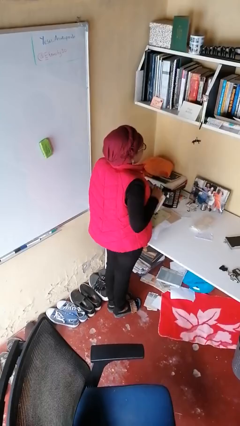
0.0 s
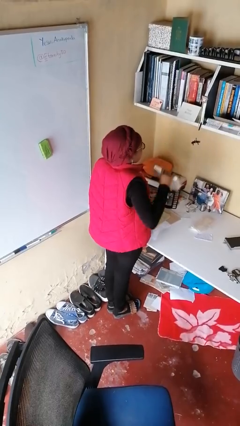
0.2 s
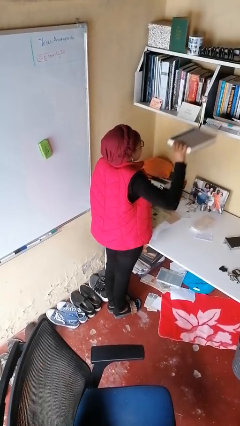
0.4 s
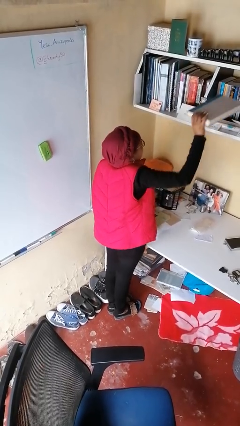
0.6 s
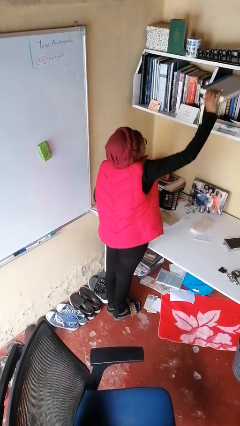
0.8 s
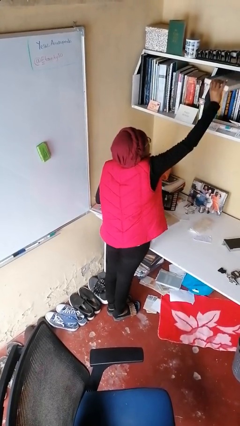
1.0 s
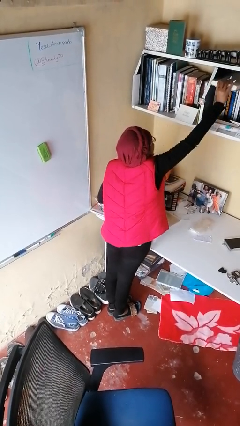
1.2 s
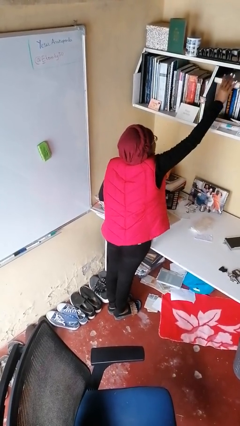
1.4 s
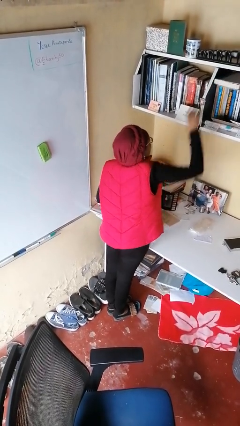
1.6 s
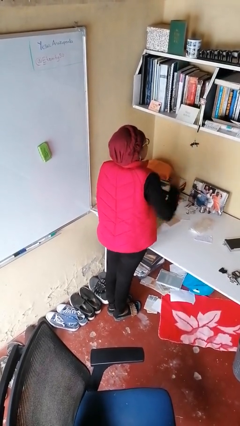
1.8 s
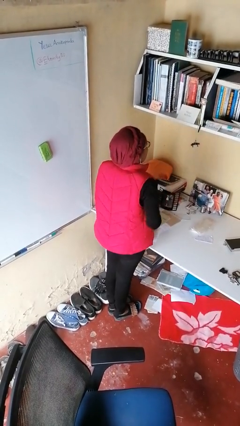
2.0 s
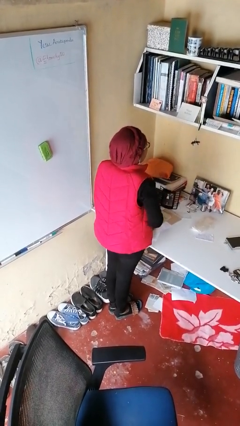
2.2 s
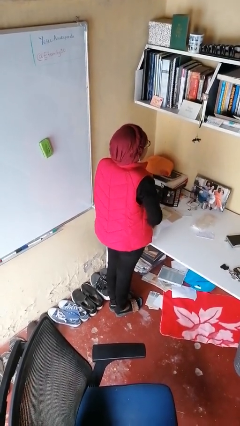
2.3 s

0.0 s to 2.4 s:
person puts down object on shelf

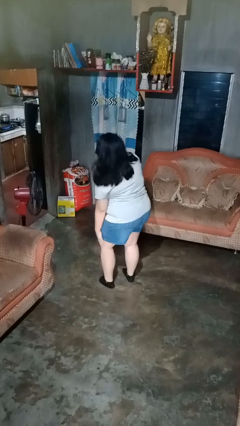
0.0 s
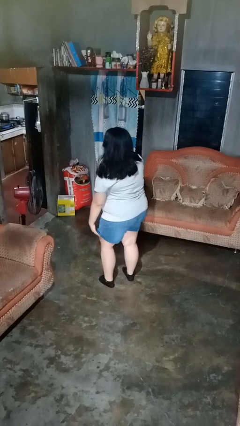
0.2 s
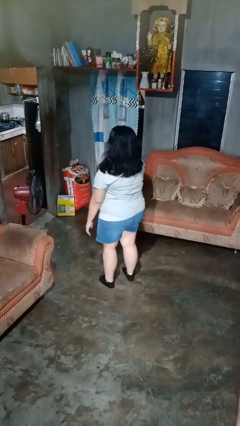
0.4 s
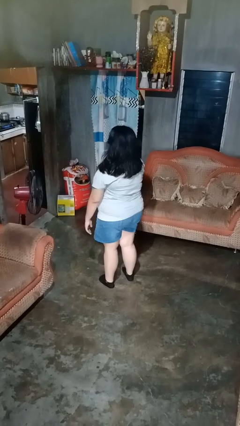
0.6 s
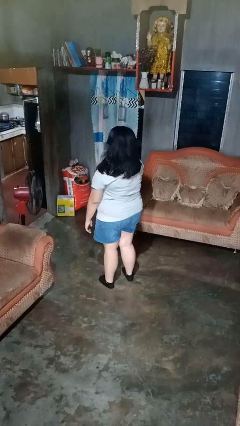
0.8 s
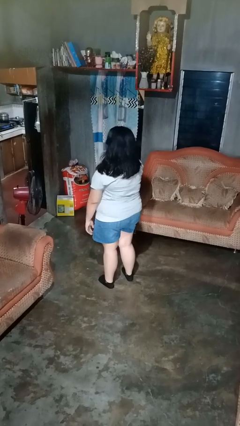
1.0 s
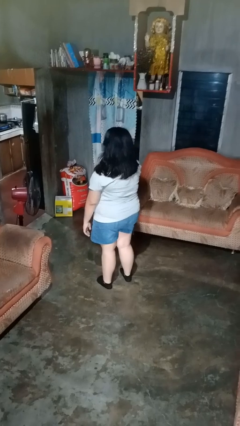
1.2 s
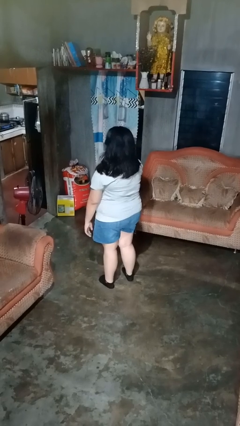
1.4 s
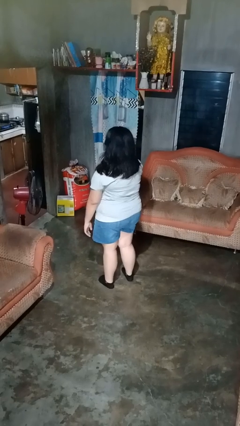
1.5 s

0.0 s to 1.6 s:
person swats bug

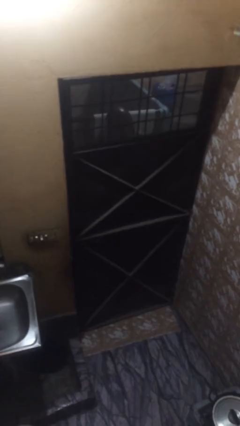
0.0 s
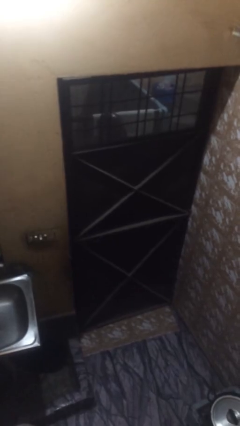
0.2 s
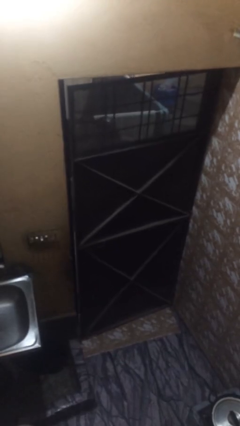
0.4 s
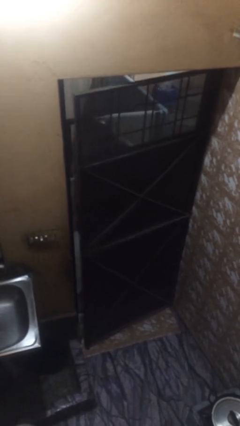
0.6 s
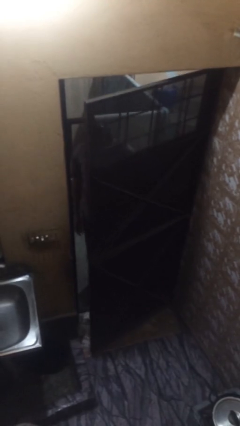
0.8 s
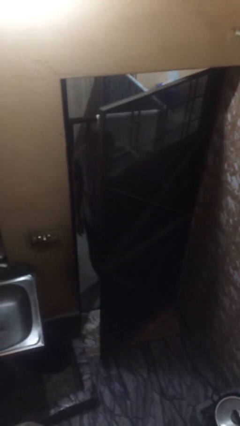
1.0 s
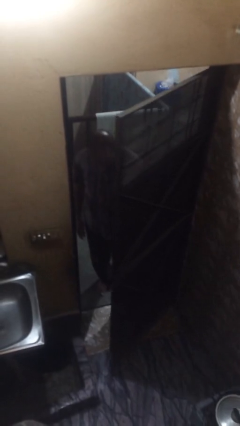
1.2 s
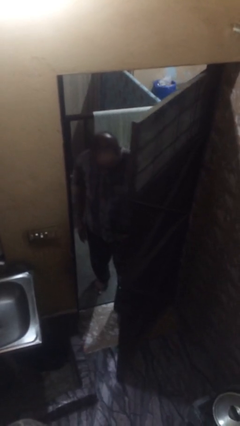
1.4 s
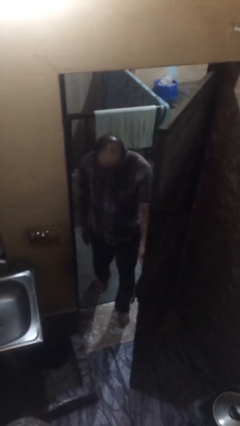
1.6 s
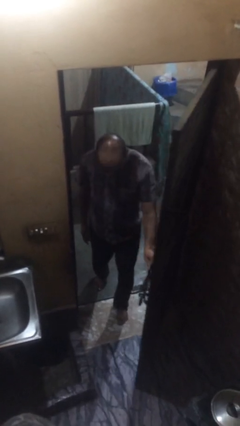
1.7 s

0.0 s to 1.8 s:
person opens facility door

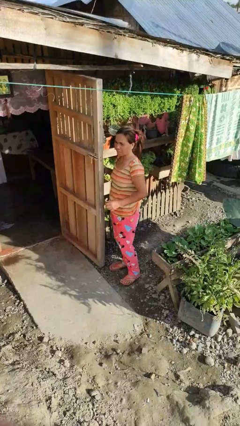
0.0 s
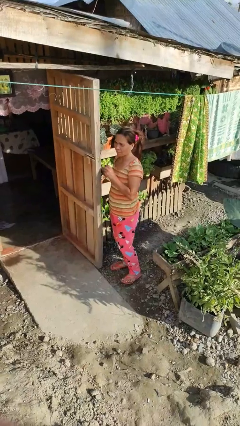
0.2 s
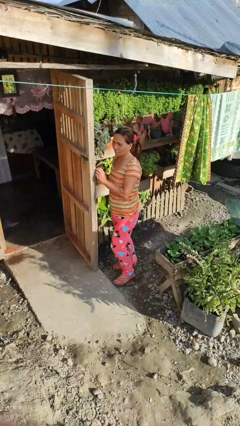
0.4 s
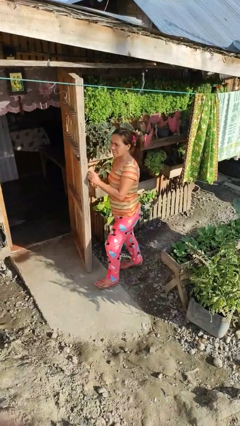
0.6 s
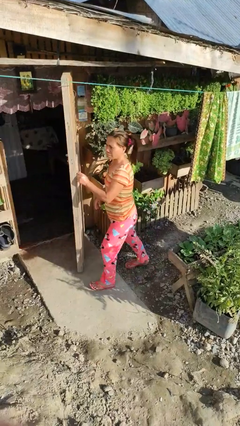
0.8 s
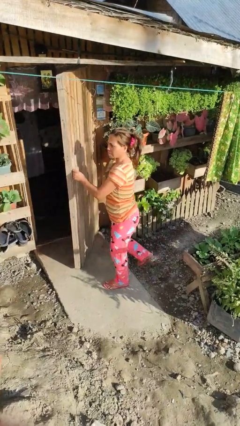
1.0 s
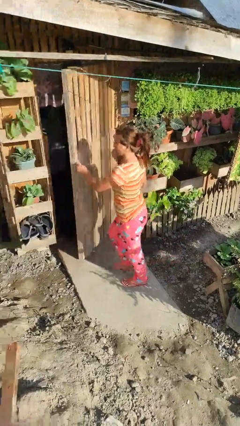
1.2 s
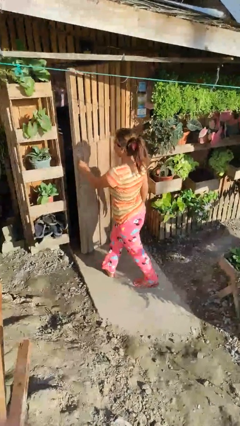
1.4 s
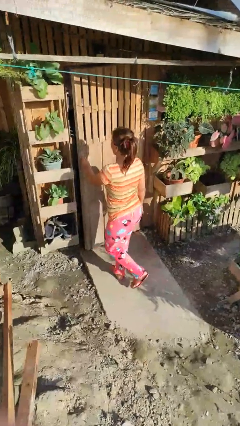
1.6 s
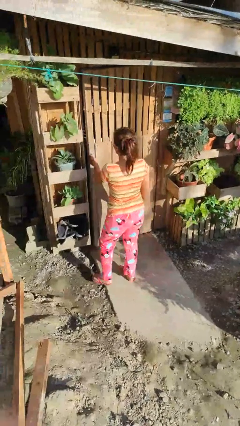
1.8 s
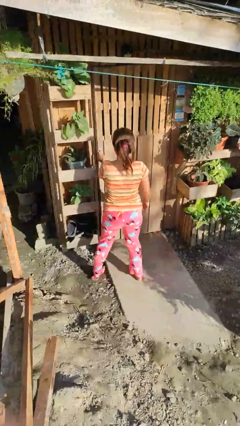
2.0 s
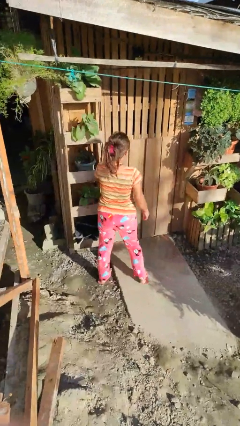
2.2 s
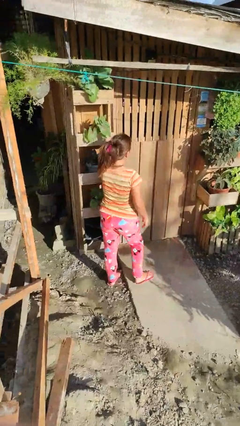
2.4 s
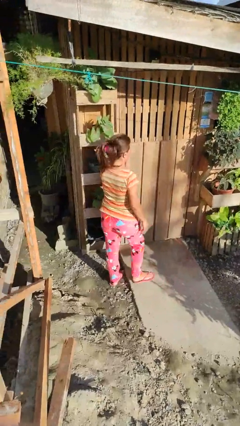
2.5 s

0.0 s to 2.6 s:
person closes facility door

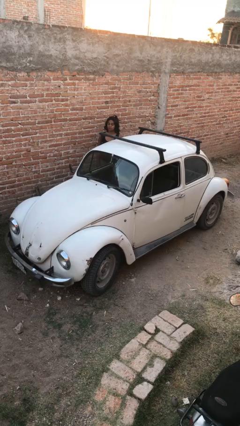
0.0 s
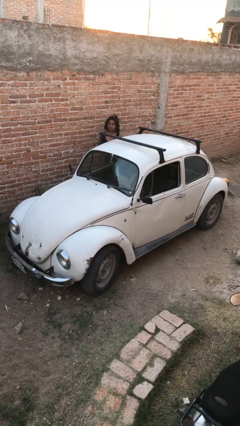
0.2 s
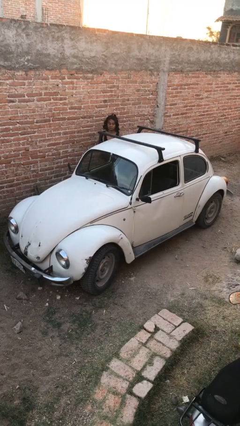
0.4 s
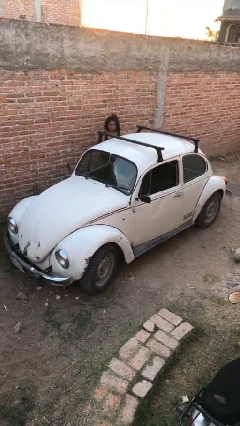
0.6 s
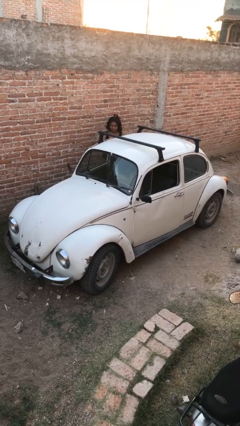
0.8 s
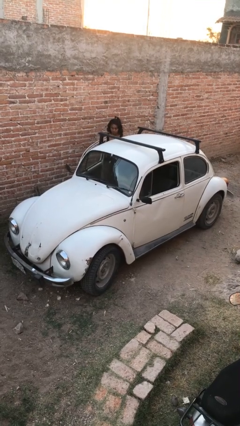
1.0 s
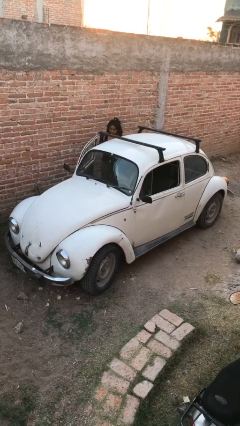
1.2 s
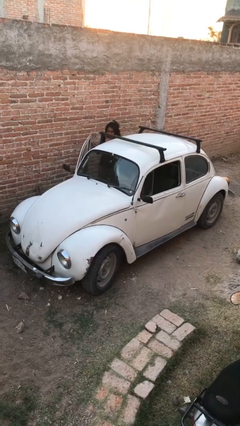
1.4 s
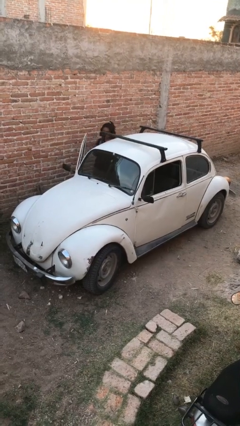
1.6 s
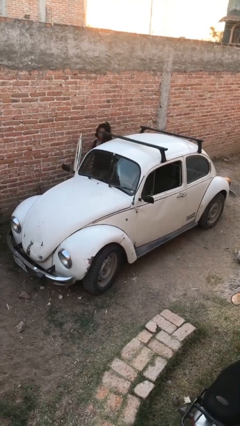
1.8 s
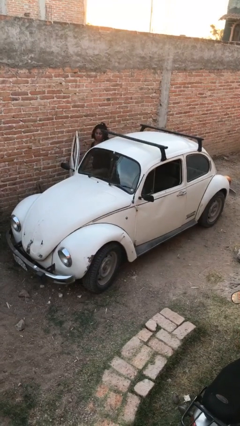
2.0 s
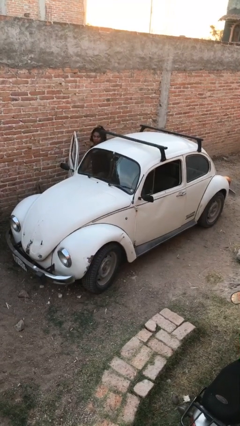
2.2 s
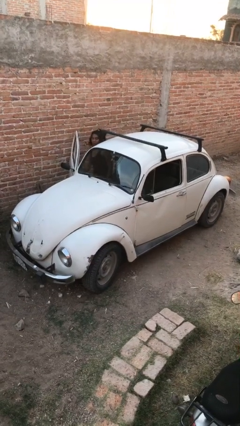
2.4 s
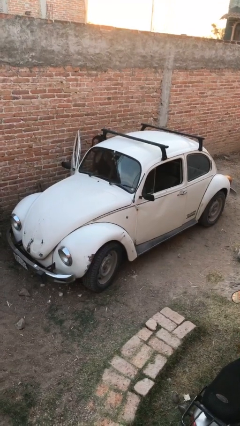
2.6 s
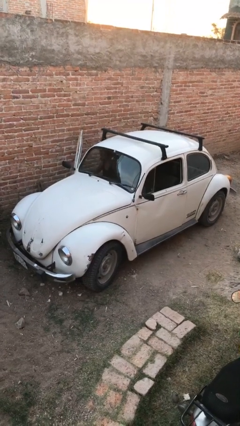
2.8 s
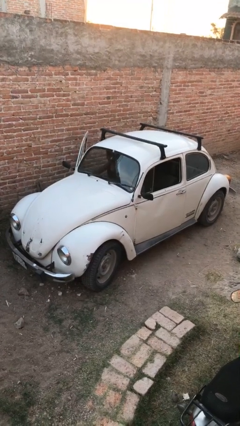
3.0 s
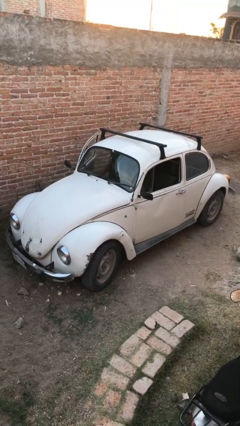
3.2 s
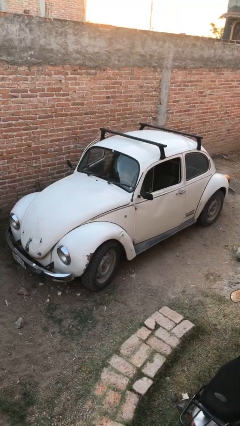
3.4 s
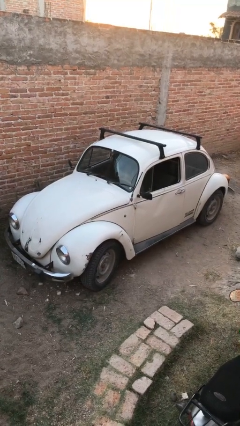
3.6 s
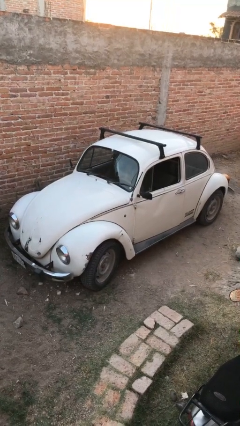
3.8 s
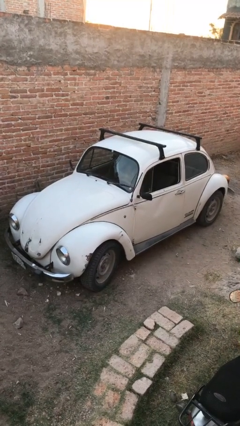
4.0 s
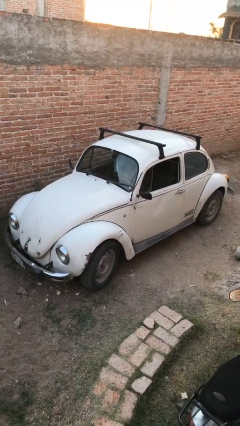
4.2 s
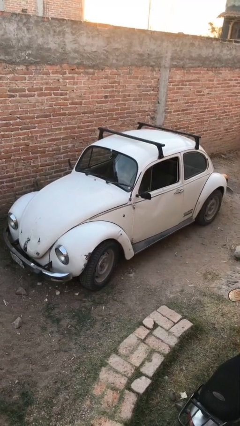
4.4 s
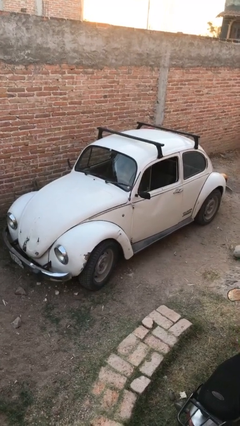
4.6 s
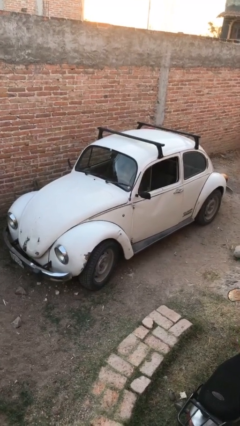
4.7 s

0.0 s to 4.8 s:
car picks up person

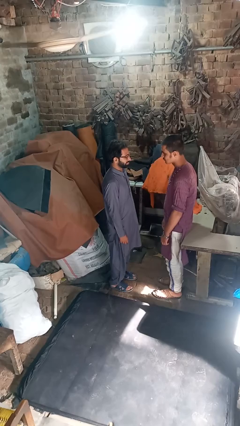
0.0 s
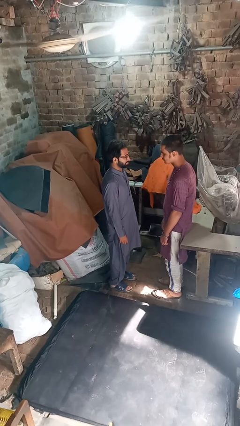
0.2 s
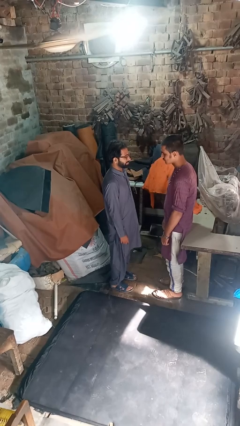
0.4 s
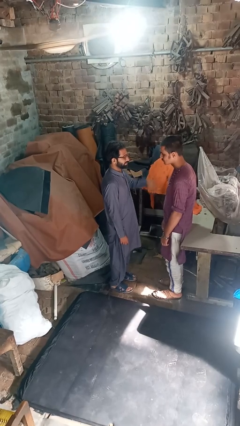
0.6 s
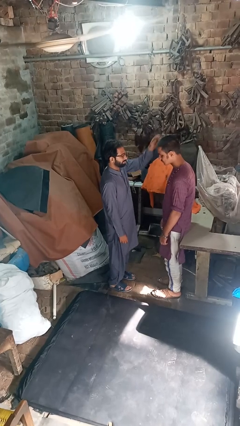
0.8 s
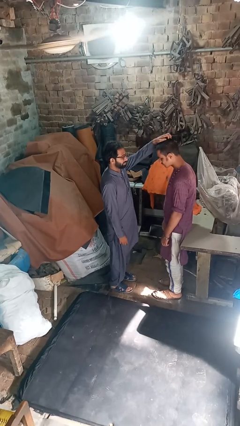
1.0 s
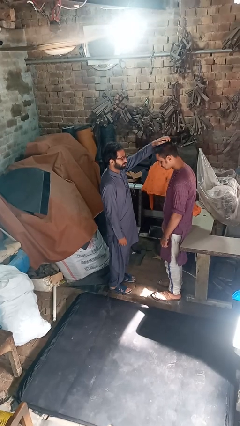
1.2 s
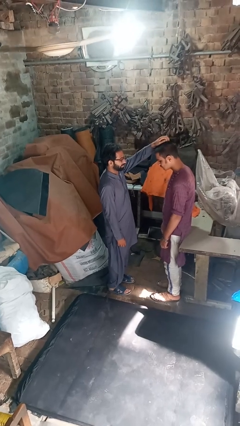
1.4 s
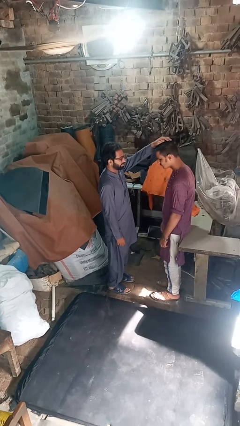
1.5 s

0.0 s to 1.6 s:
person grabs person by hair

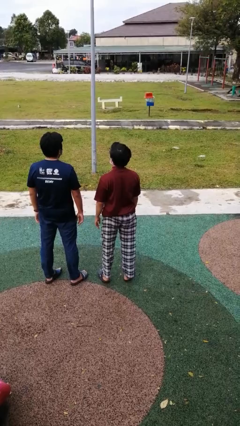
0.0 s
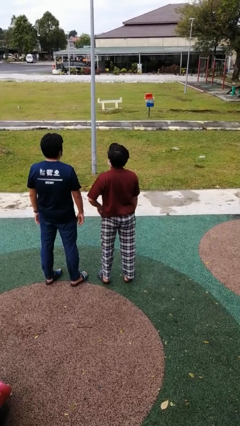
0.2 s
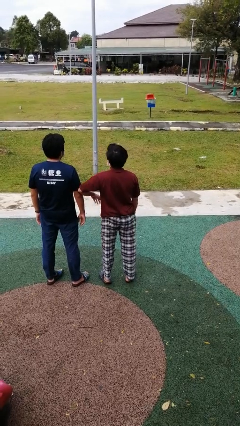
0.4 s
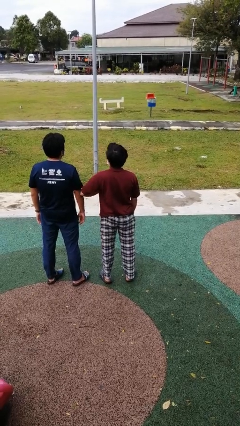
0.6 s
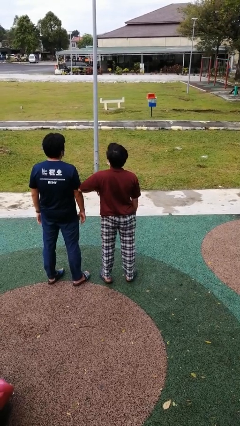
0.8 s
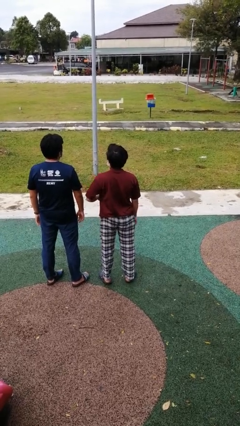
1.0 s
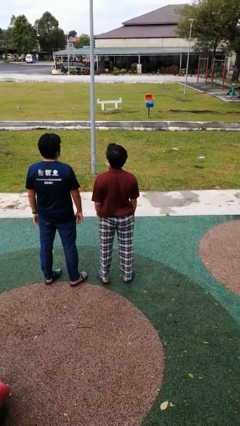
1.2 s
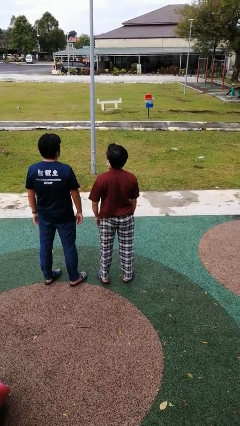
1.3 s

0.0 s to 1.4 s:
person nudges person with elbow

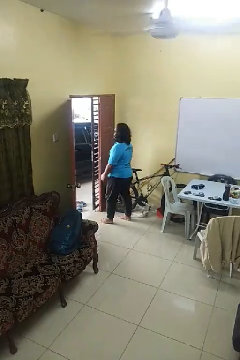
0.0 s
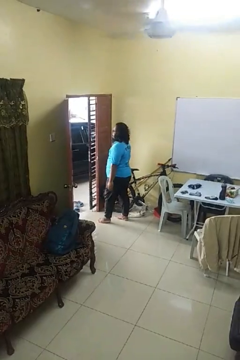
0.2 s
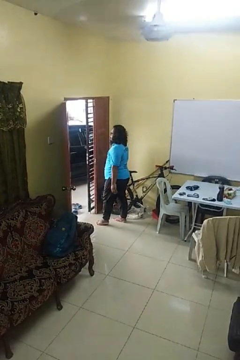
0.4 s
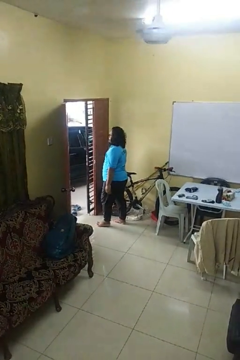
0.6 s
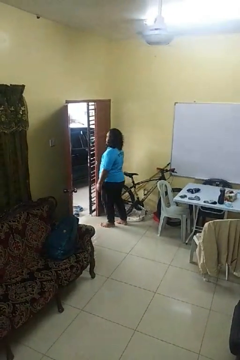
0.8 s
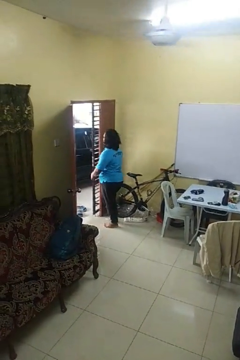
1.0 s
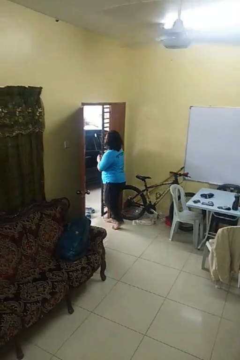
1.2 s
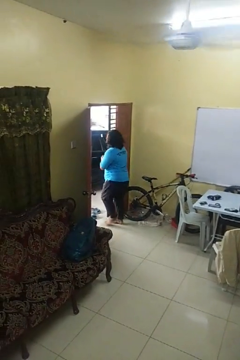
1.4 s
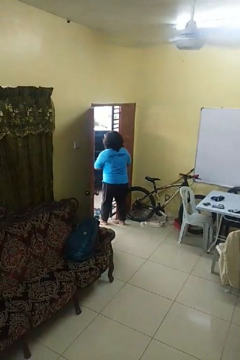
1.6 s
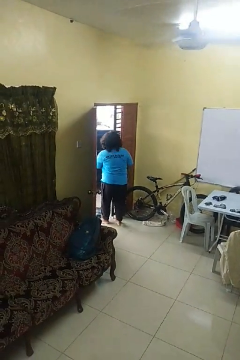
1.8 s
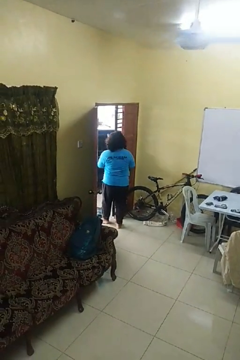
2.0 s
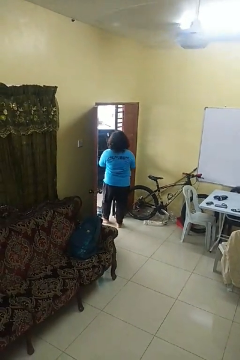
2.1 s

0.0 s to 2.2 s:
person bumps into wall
